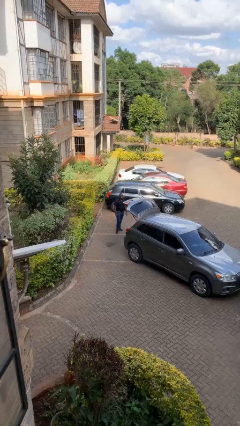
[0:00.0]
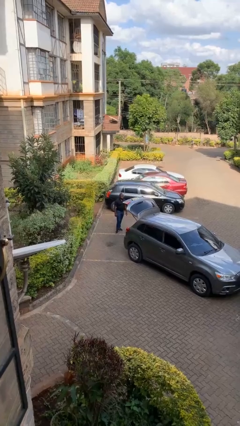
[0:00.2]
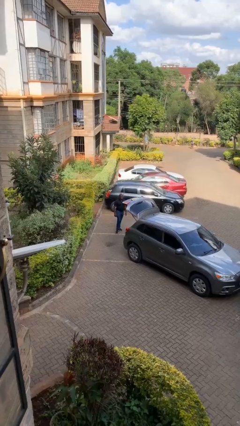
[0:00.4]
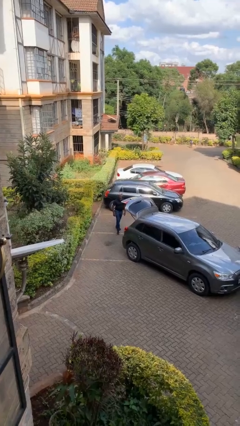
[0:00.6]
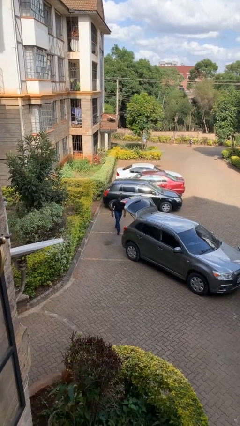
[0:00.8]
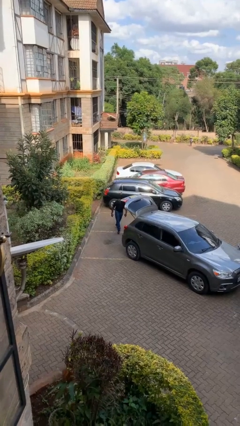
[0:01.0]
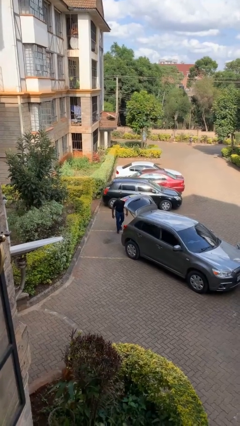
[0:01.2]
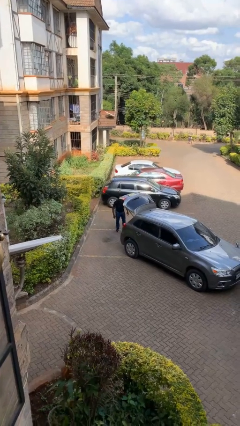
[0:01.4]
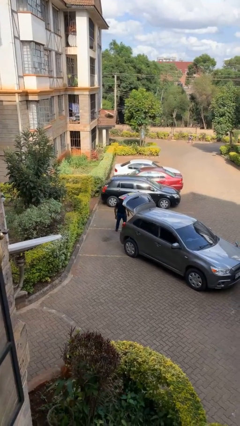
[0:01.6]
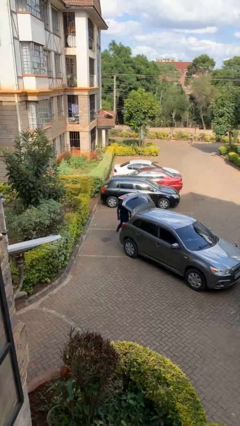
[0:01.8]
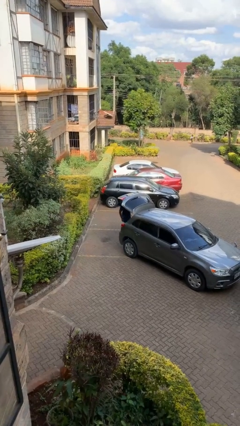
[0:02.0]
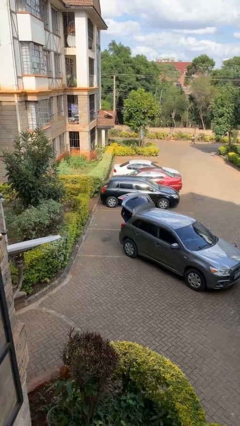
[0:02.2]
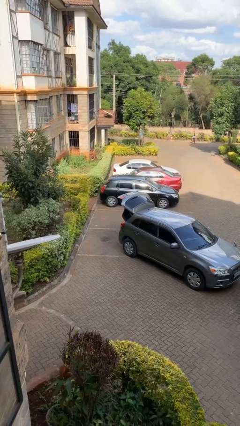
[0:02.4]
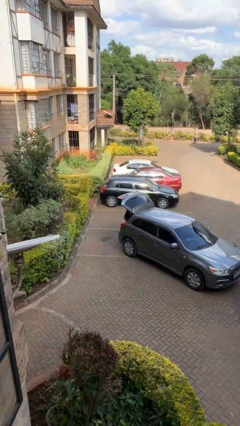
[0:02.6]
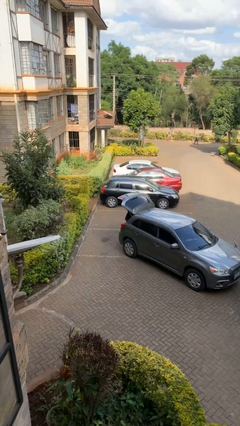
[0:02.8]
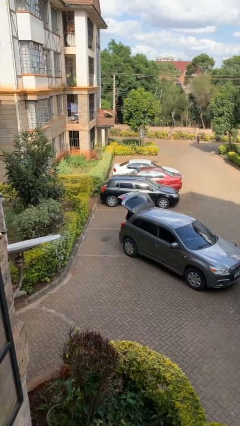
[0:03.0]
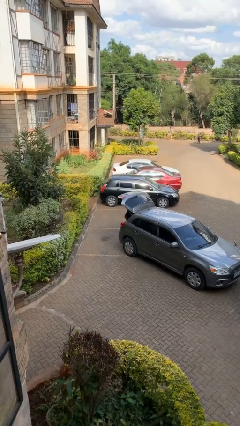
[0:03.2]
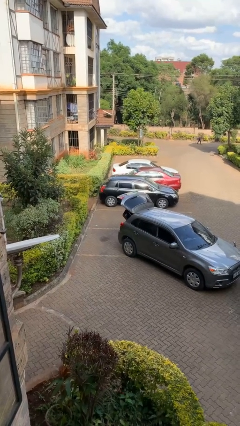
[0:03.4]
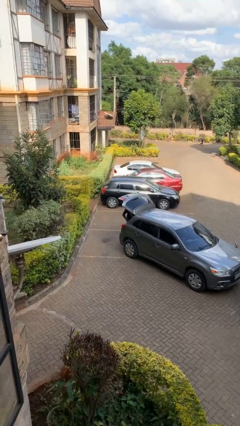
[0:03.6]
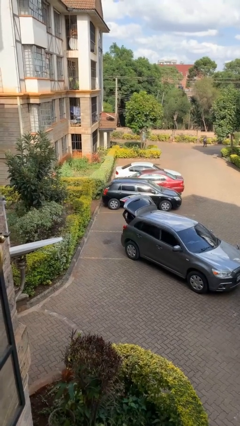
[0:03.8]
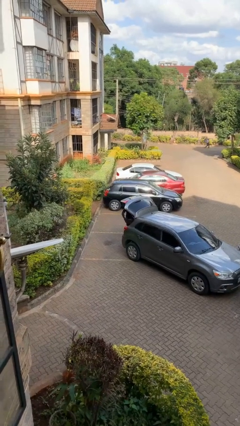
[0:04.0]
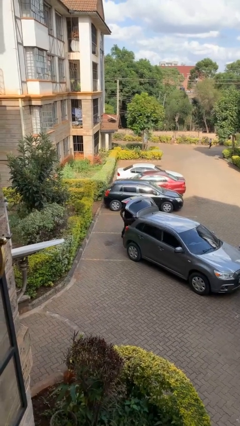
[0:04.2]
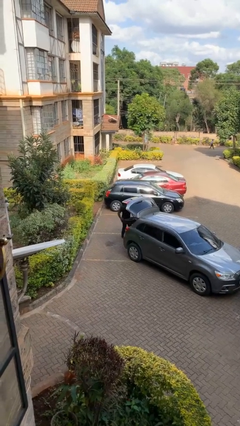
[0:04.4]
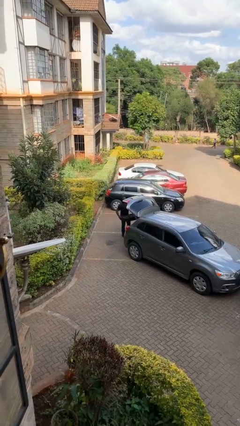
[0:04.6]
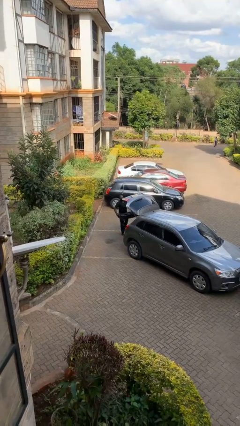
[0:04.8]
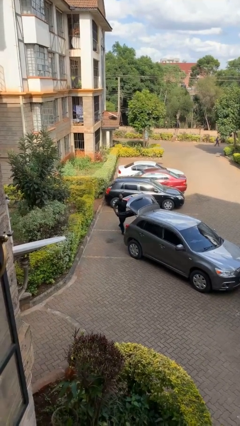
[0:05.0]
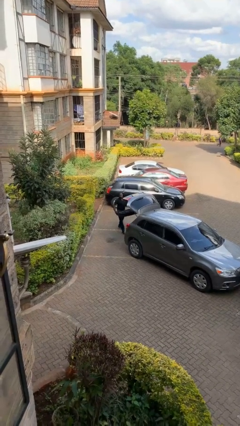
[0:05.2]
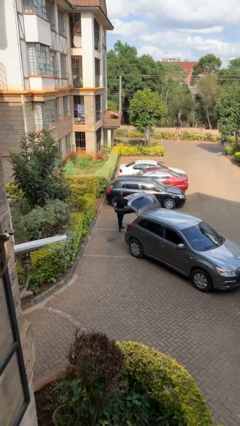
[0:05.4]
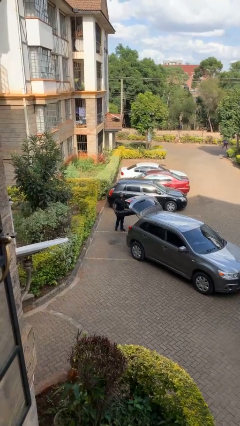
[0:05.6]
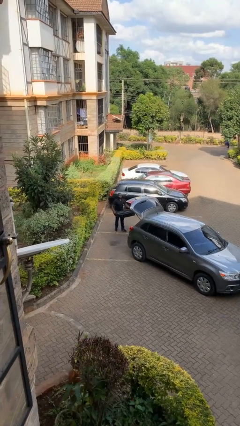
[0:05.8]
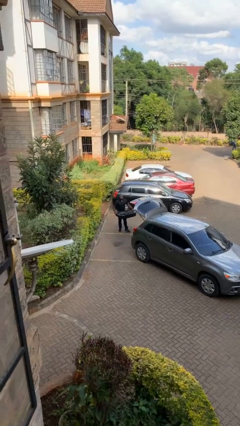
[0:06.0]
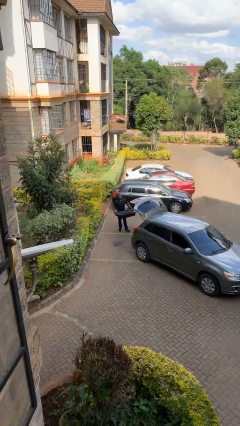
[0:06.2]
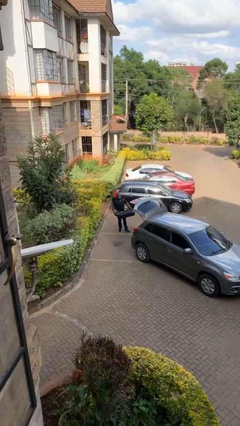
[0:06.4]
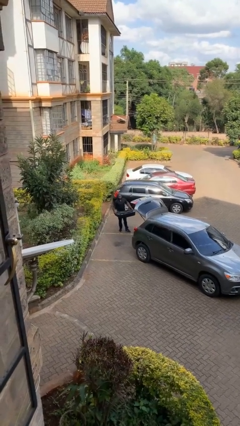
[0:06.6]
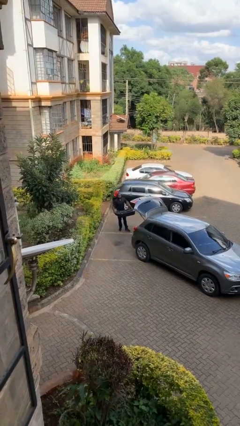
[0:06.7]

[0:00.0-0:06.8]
person unloads car

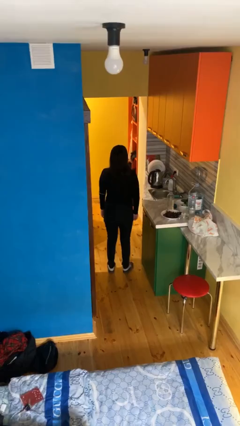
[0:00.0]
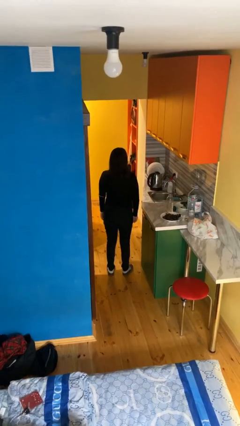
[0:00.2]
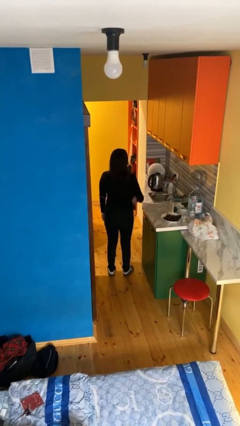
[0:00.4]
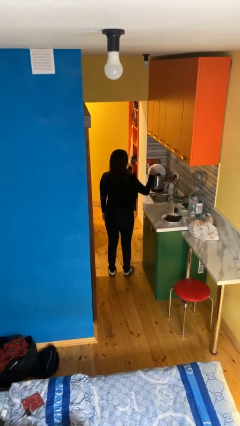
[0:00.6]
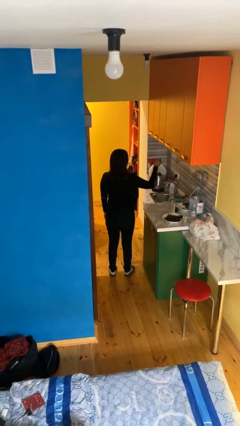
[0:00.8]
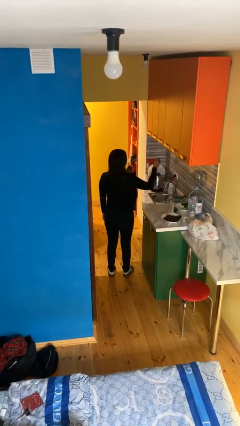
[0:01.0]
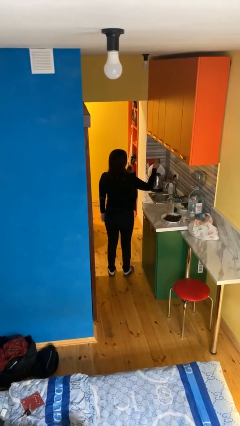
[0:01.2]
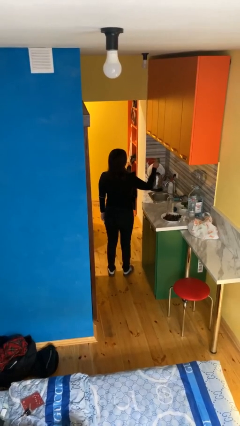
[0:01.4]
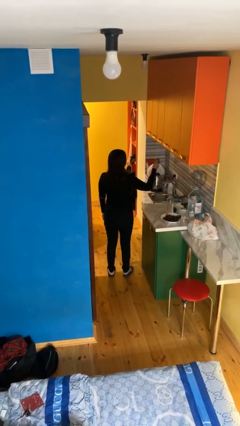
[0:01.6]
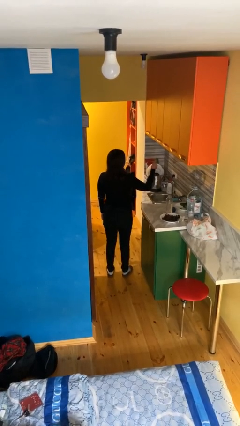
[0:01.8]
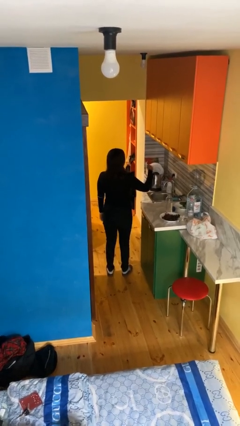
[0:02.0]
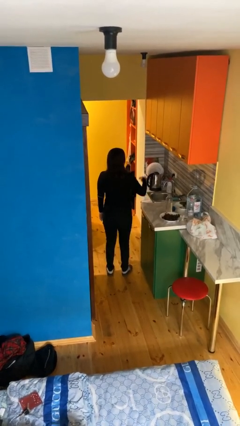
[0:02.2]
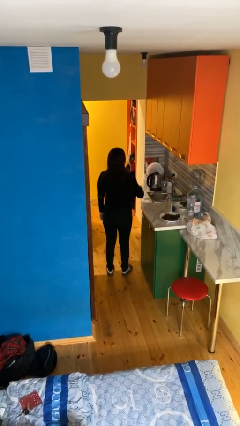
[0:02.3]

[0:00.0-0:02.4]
person gestures thumbs up

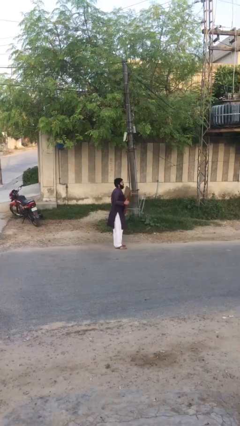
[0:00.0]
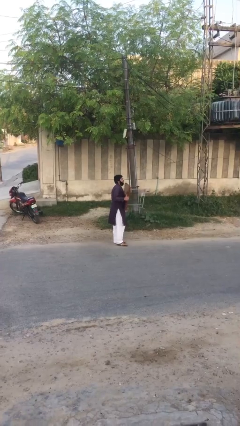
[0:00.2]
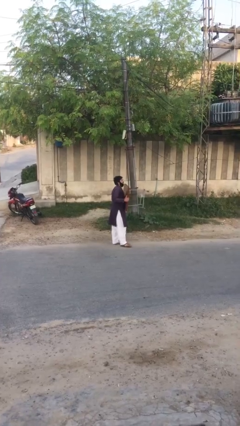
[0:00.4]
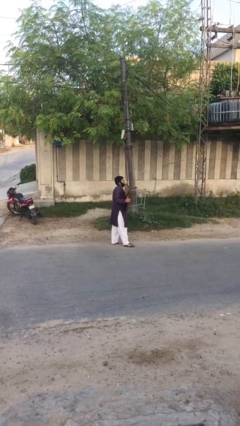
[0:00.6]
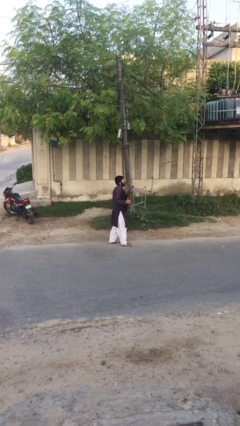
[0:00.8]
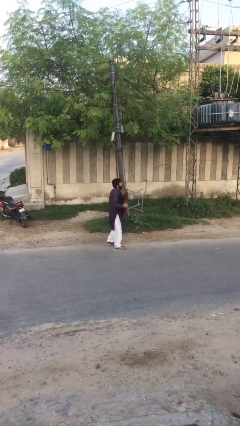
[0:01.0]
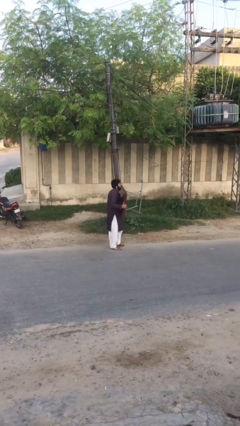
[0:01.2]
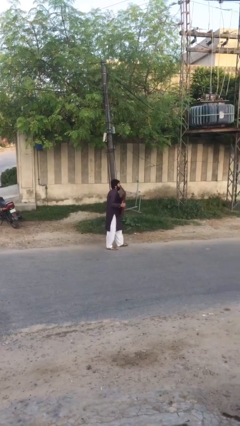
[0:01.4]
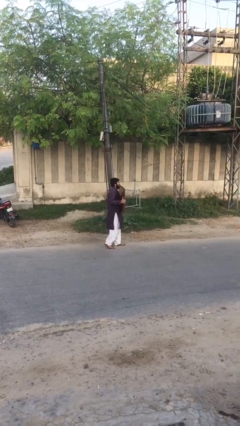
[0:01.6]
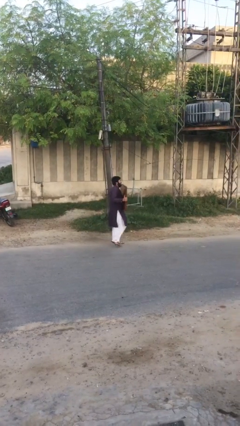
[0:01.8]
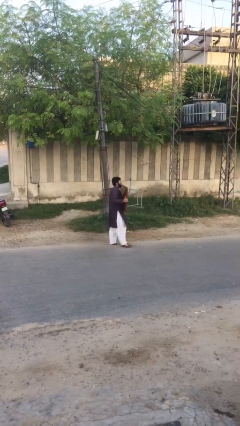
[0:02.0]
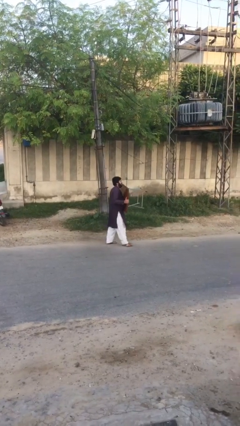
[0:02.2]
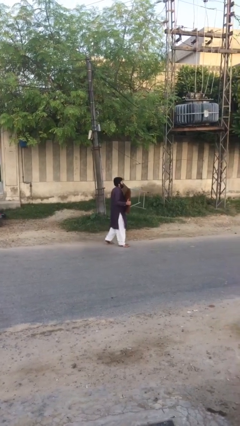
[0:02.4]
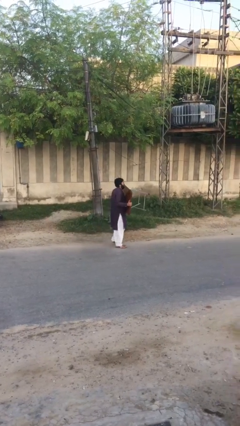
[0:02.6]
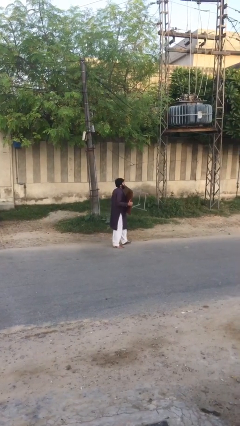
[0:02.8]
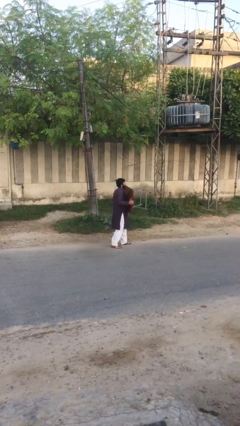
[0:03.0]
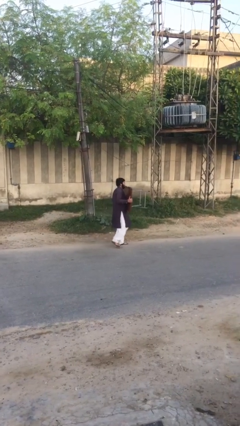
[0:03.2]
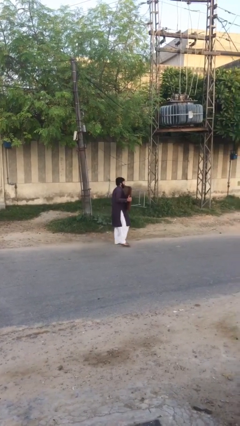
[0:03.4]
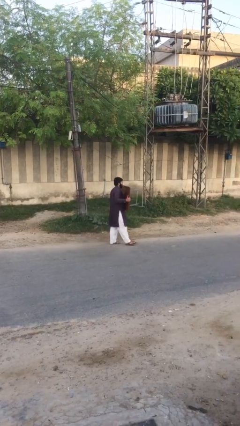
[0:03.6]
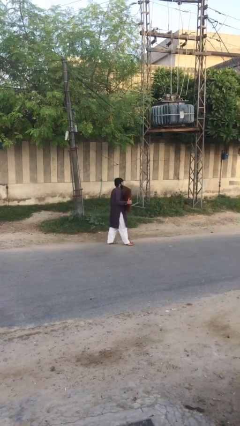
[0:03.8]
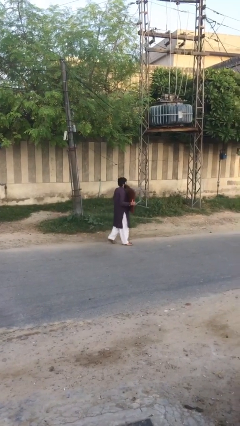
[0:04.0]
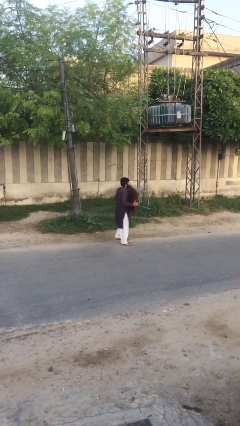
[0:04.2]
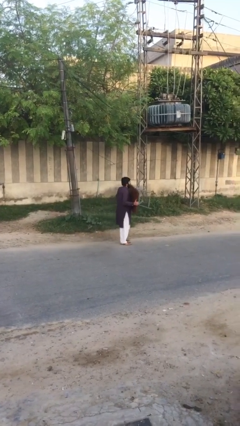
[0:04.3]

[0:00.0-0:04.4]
person carries heavy object

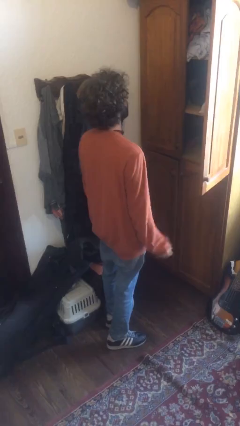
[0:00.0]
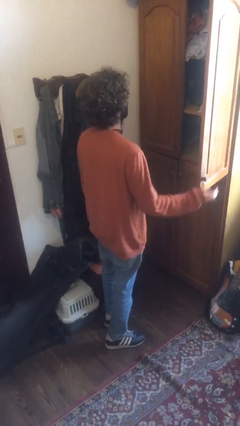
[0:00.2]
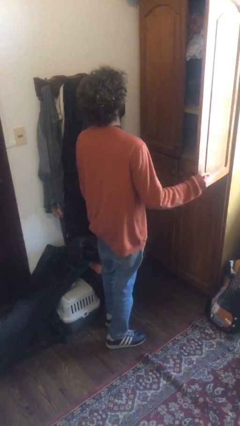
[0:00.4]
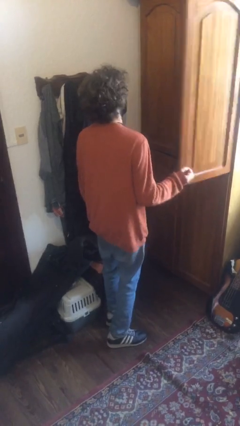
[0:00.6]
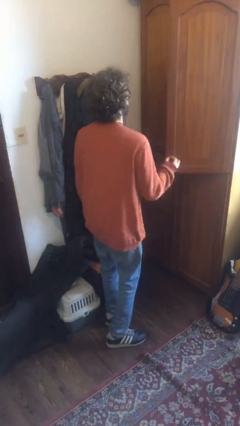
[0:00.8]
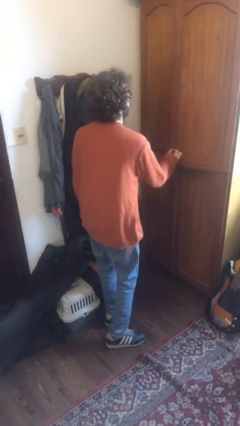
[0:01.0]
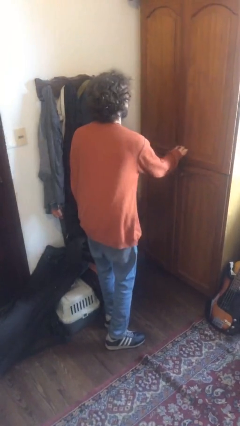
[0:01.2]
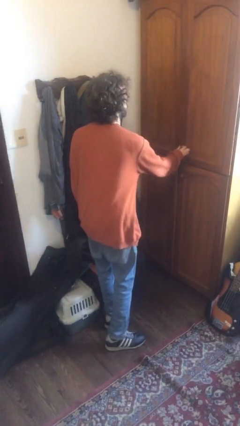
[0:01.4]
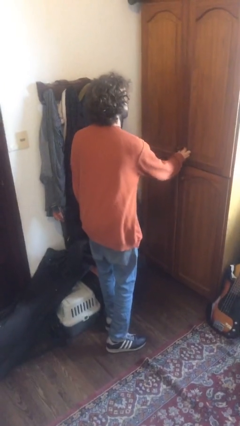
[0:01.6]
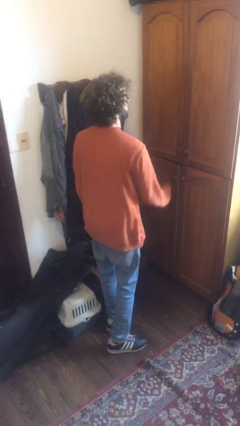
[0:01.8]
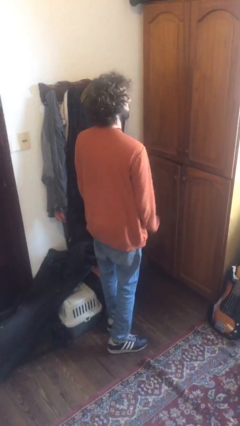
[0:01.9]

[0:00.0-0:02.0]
person closes dresser drawer

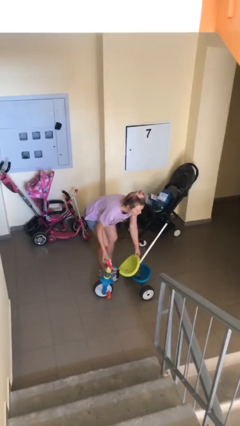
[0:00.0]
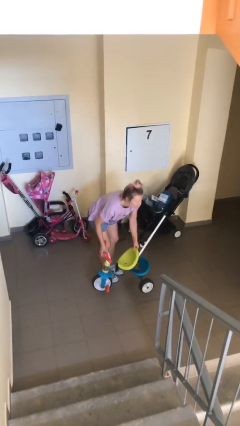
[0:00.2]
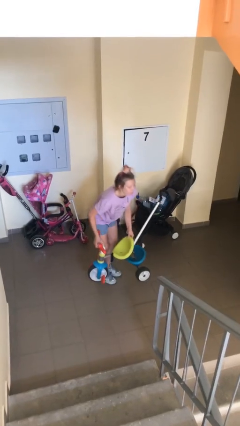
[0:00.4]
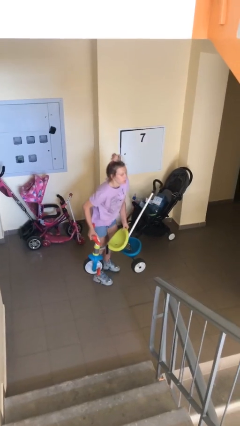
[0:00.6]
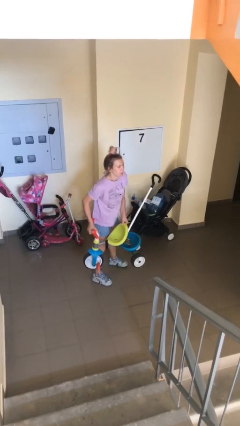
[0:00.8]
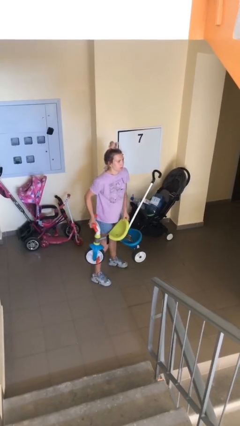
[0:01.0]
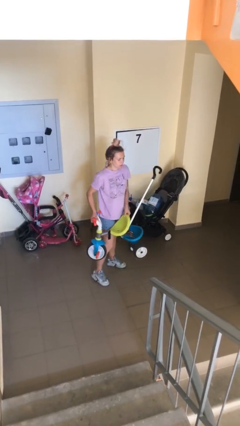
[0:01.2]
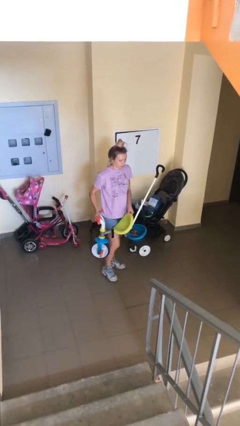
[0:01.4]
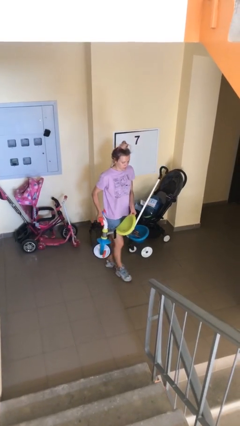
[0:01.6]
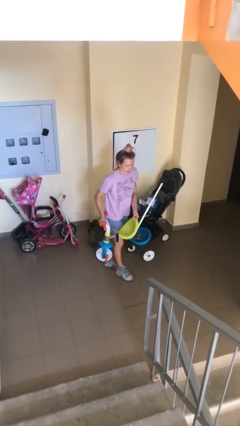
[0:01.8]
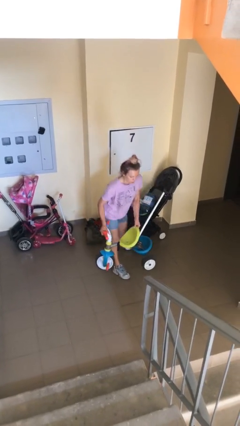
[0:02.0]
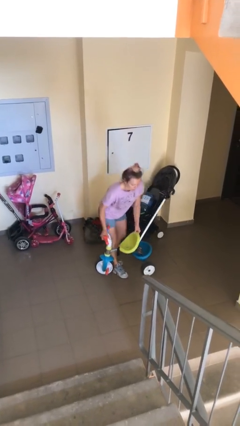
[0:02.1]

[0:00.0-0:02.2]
person carries bicycle
